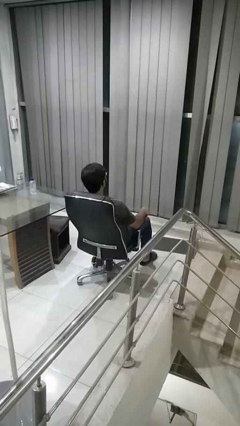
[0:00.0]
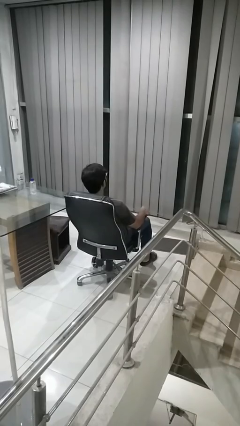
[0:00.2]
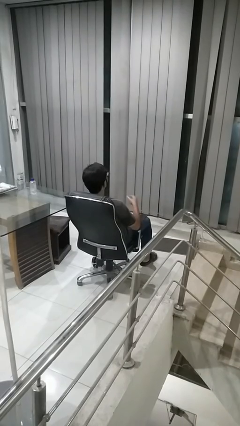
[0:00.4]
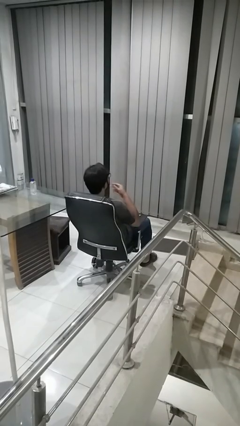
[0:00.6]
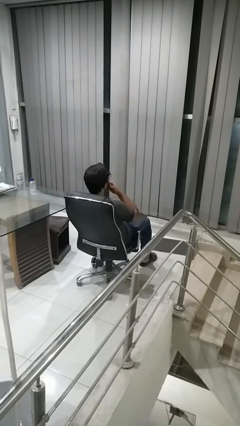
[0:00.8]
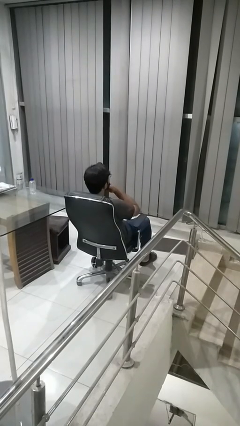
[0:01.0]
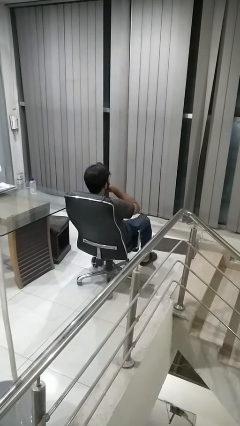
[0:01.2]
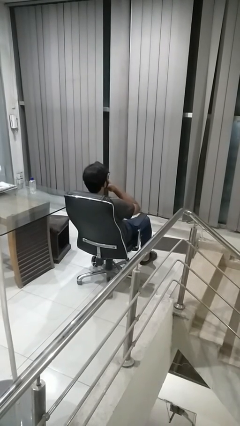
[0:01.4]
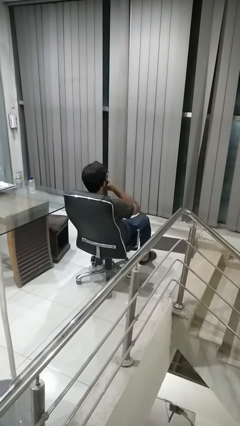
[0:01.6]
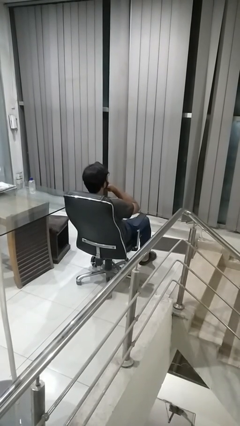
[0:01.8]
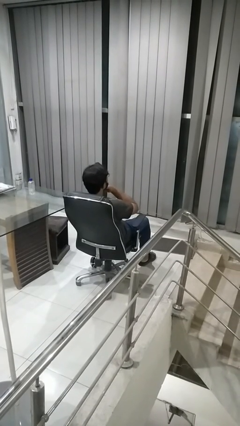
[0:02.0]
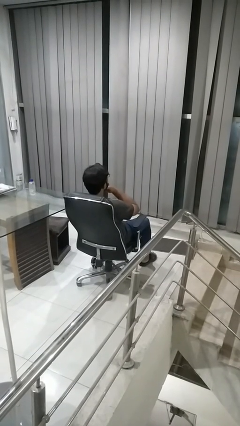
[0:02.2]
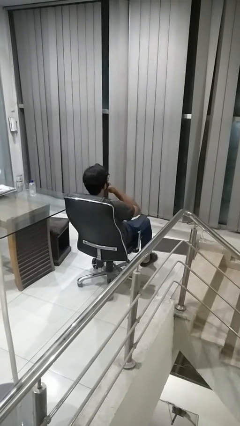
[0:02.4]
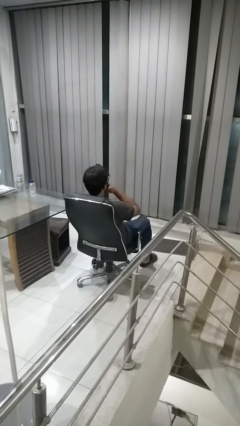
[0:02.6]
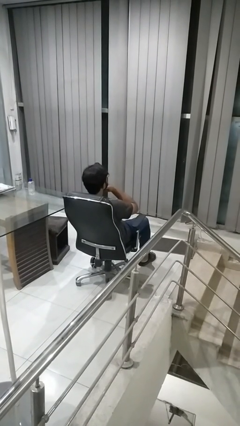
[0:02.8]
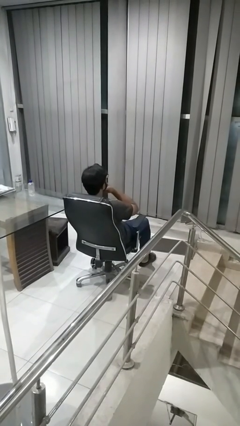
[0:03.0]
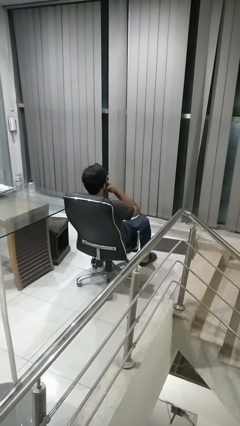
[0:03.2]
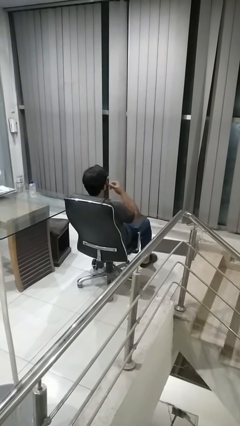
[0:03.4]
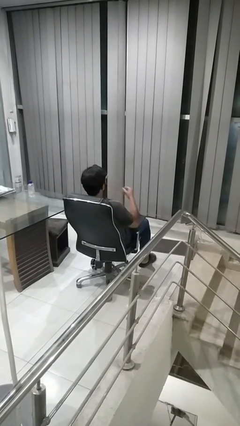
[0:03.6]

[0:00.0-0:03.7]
person strokes chin

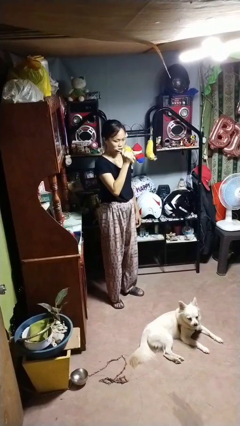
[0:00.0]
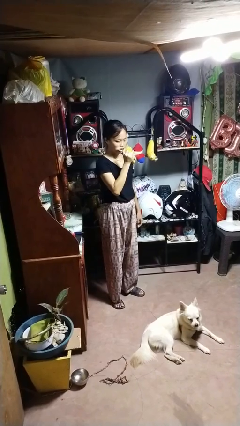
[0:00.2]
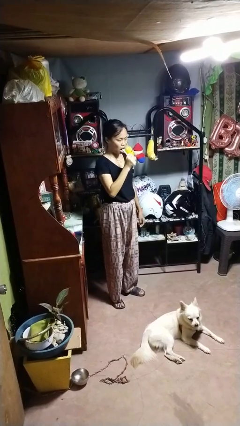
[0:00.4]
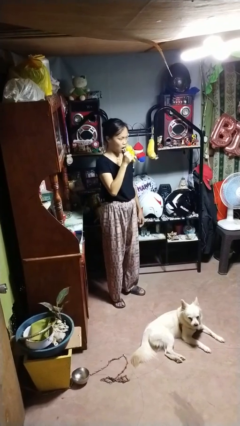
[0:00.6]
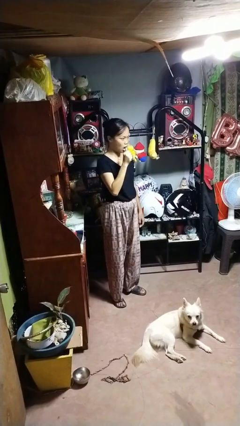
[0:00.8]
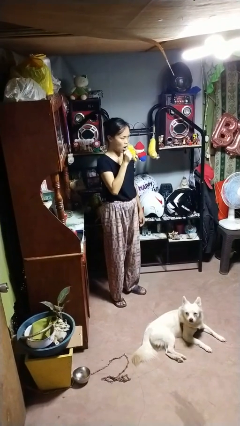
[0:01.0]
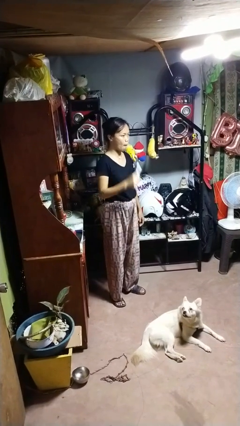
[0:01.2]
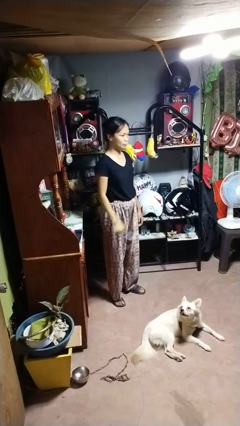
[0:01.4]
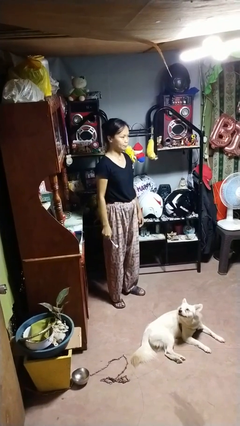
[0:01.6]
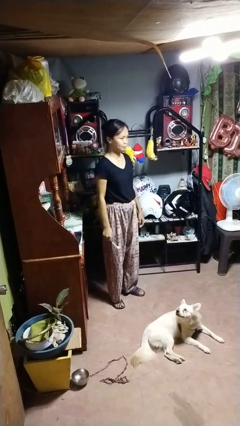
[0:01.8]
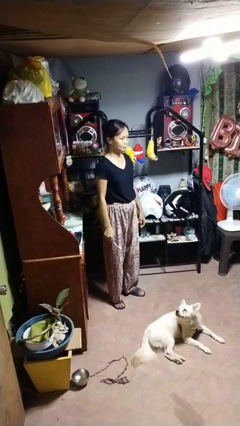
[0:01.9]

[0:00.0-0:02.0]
person brushes teeth

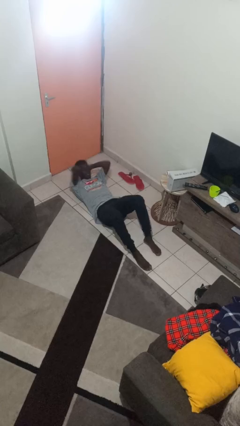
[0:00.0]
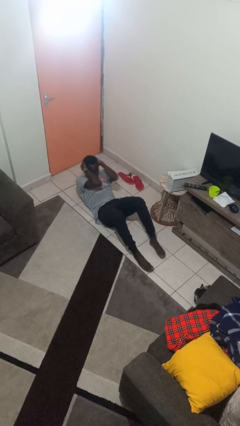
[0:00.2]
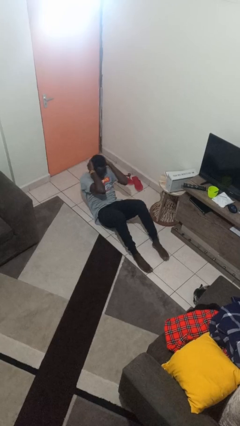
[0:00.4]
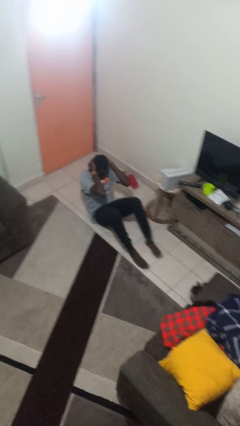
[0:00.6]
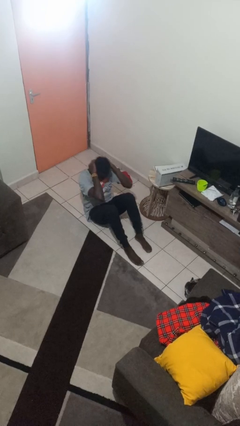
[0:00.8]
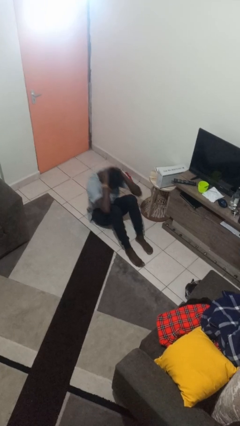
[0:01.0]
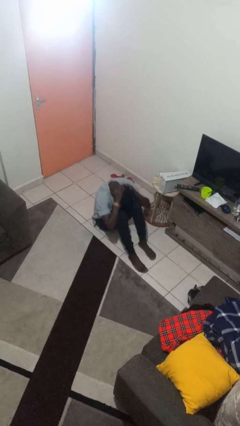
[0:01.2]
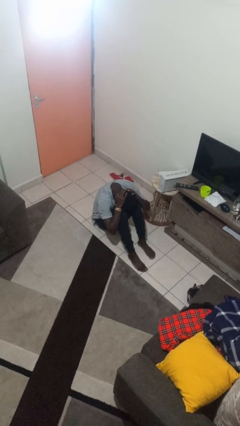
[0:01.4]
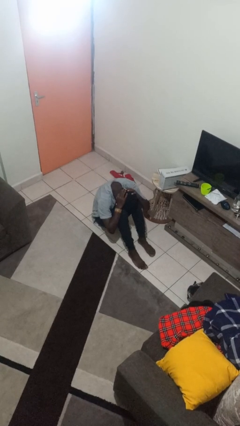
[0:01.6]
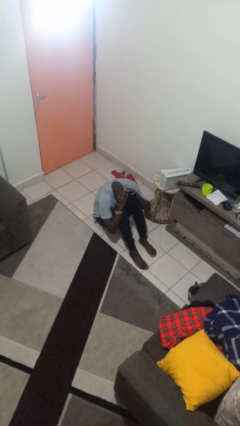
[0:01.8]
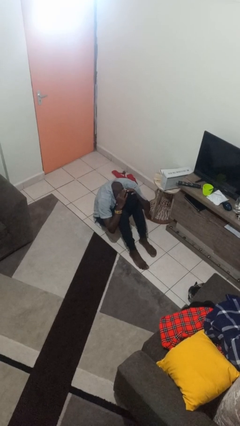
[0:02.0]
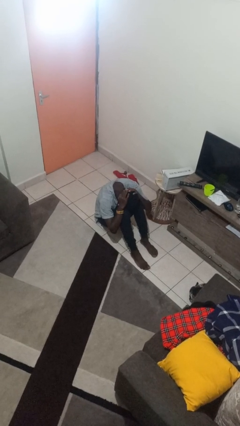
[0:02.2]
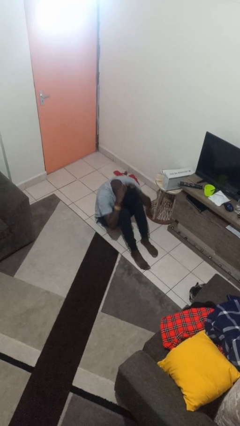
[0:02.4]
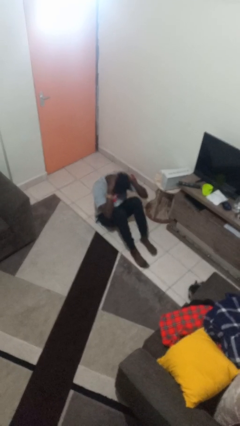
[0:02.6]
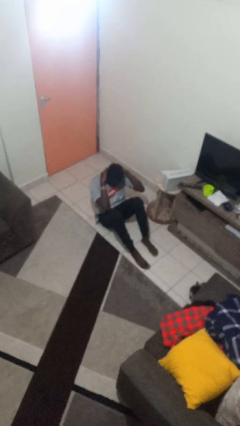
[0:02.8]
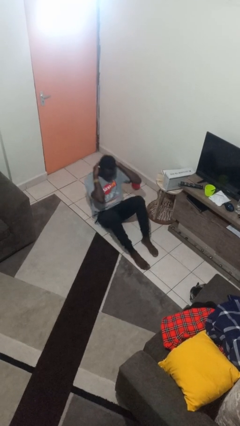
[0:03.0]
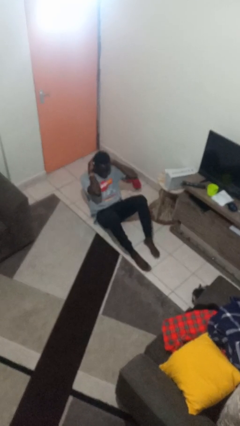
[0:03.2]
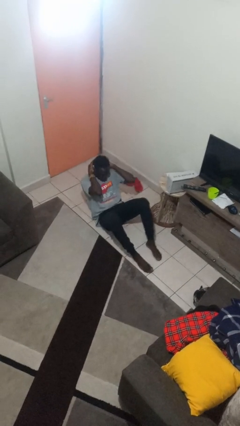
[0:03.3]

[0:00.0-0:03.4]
person exercises with situp

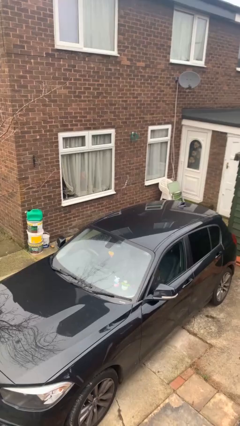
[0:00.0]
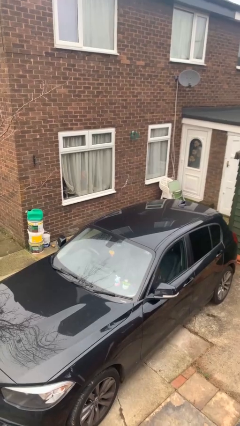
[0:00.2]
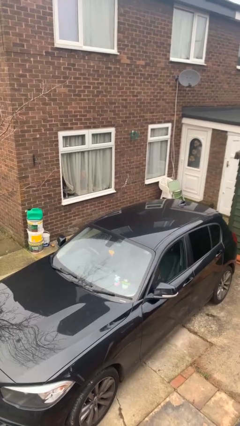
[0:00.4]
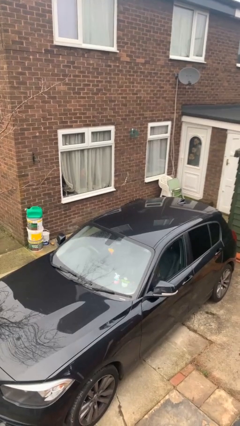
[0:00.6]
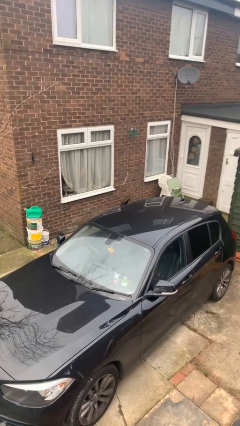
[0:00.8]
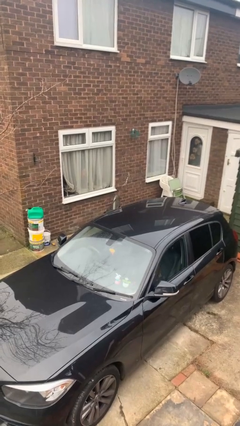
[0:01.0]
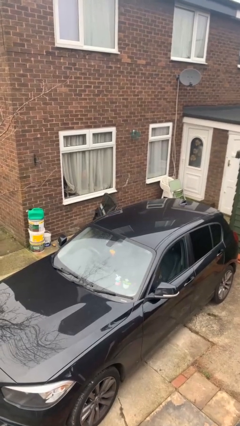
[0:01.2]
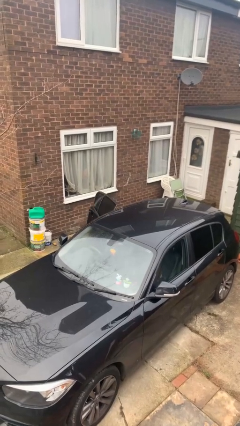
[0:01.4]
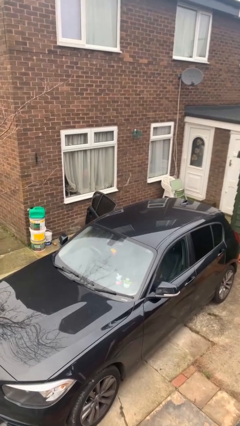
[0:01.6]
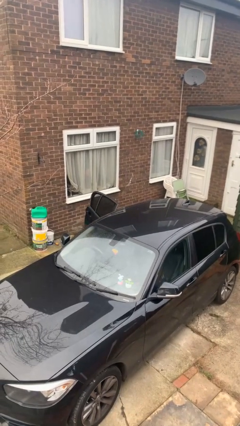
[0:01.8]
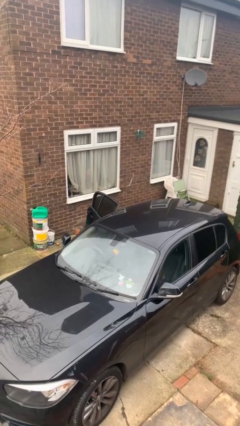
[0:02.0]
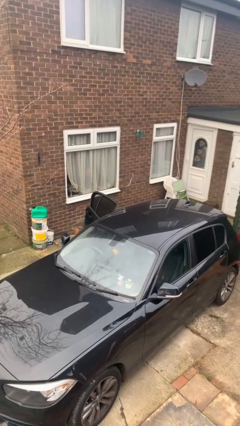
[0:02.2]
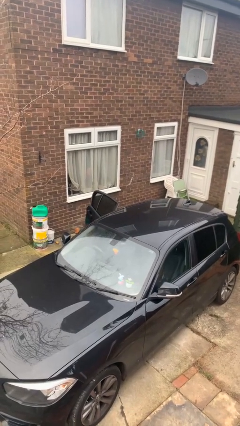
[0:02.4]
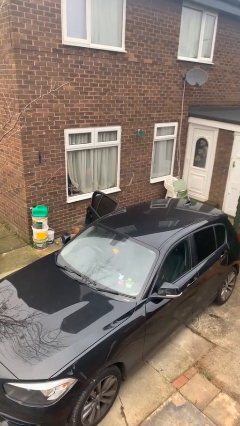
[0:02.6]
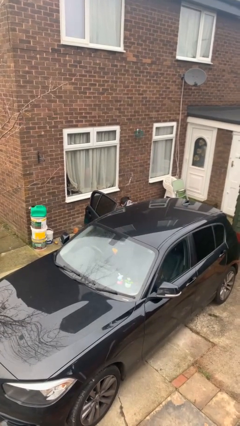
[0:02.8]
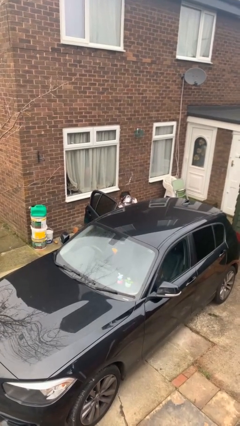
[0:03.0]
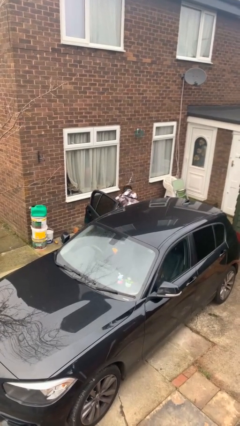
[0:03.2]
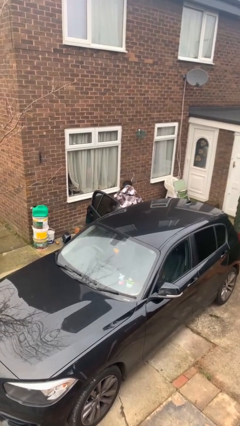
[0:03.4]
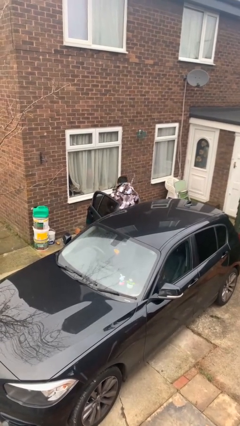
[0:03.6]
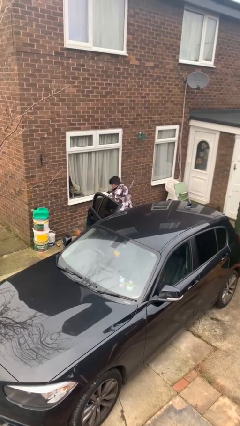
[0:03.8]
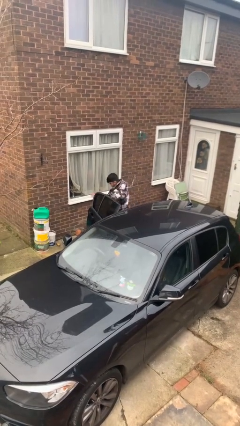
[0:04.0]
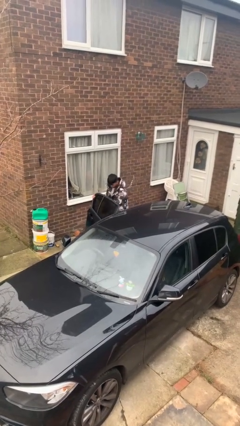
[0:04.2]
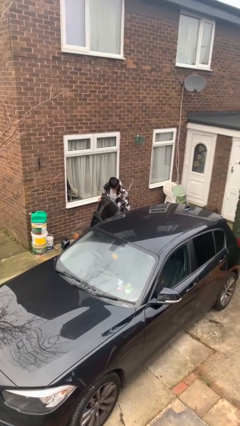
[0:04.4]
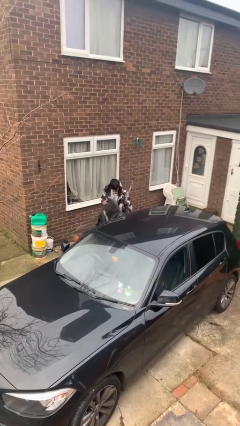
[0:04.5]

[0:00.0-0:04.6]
car drops off person

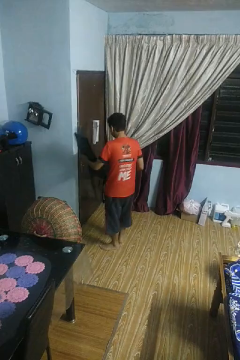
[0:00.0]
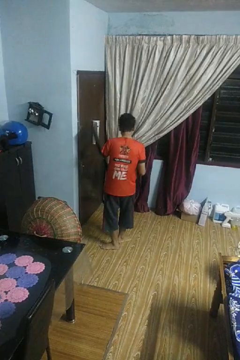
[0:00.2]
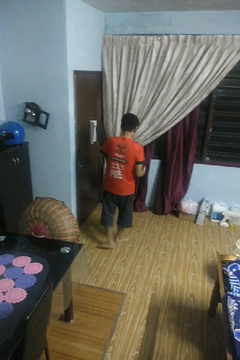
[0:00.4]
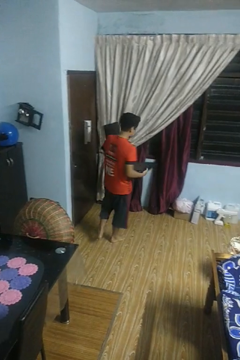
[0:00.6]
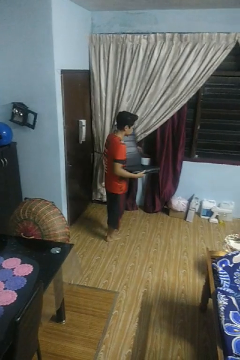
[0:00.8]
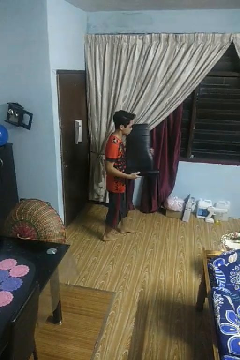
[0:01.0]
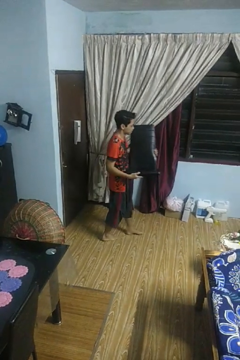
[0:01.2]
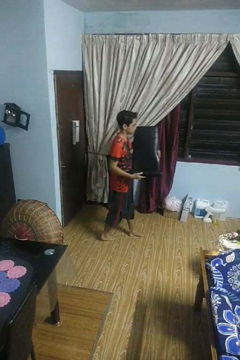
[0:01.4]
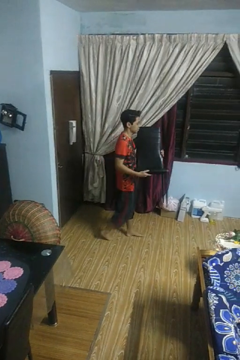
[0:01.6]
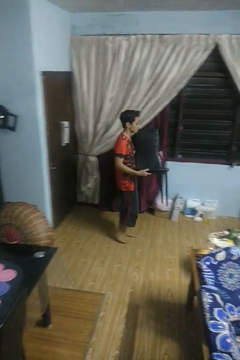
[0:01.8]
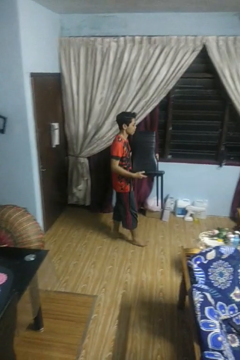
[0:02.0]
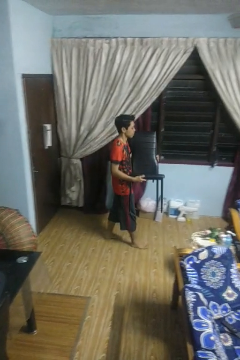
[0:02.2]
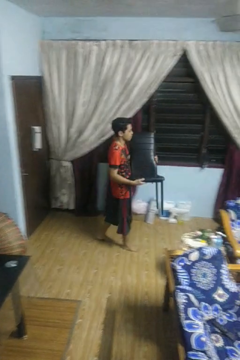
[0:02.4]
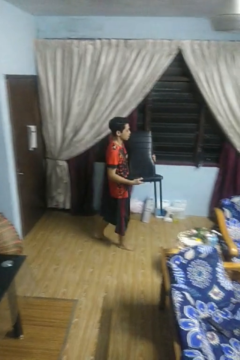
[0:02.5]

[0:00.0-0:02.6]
person carries furniture

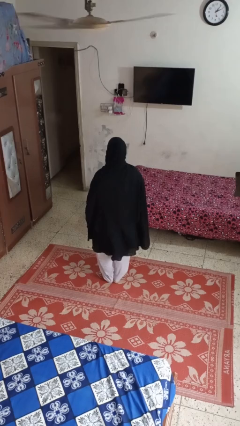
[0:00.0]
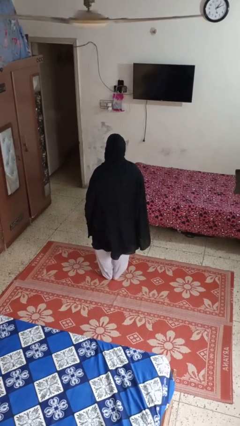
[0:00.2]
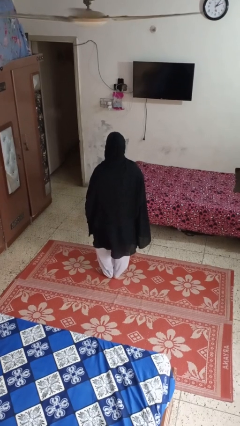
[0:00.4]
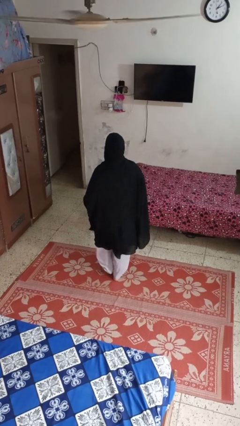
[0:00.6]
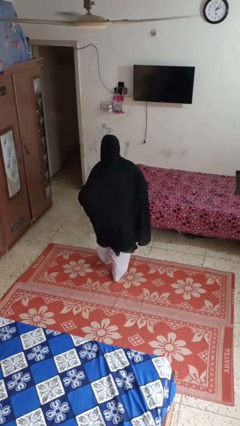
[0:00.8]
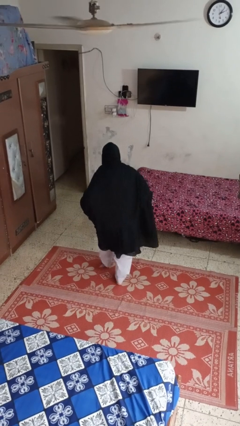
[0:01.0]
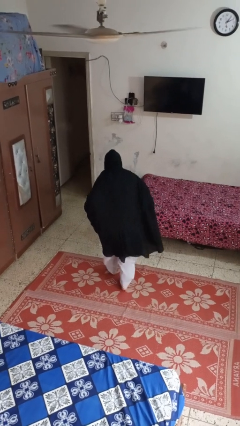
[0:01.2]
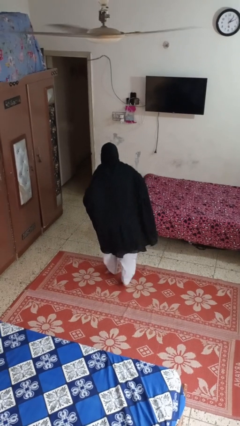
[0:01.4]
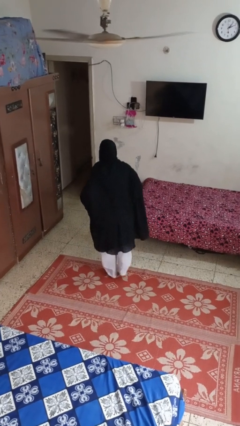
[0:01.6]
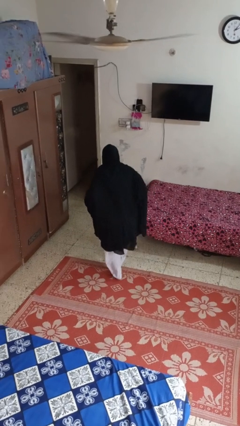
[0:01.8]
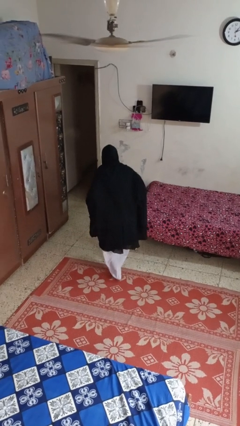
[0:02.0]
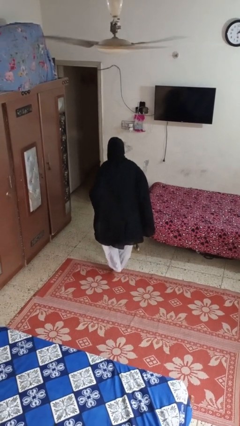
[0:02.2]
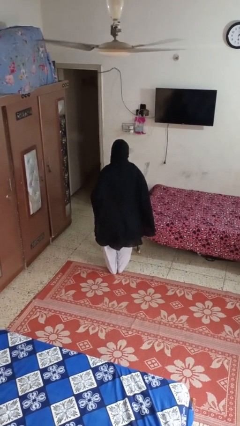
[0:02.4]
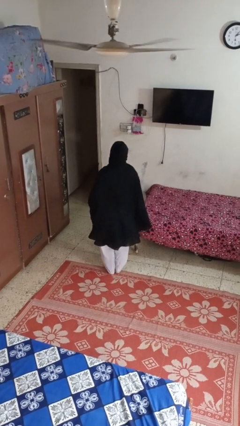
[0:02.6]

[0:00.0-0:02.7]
person walks tiptoe
